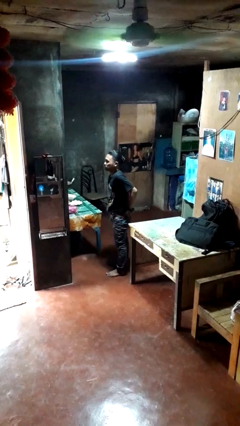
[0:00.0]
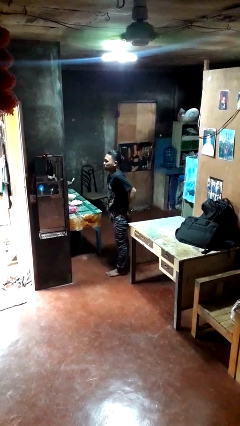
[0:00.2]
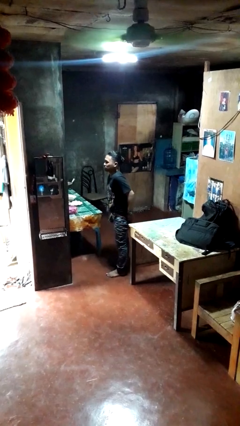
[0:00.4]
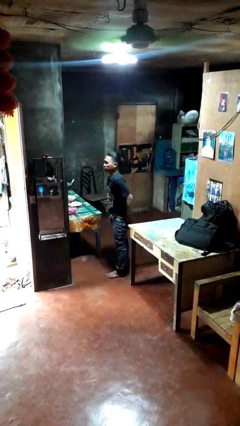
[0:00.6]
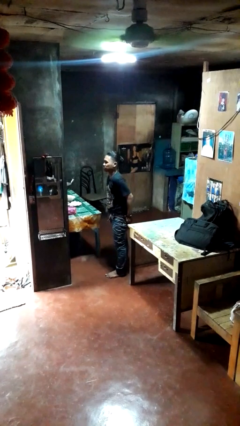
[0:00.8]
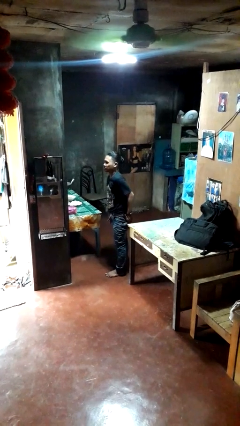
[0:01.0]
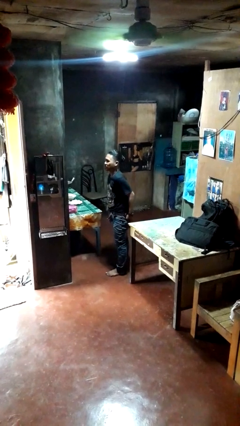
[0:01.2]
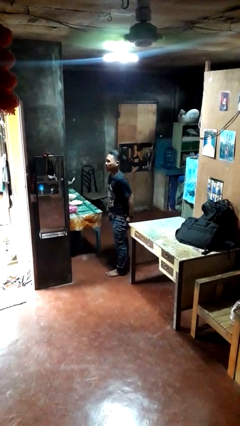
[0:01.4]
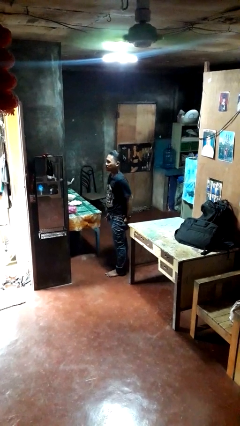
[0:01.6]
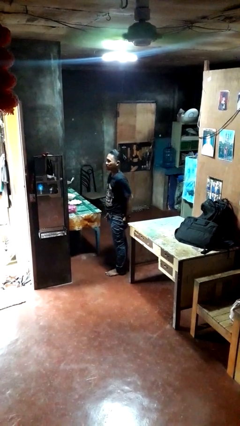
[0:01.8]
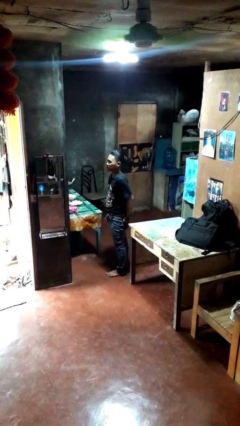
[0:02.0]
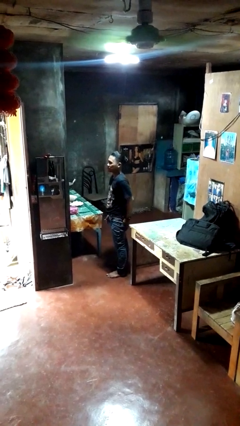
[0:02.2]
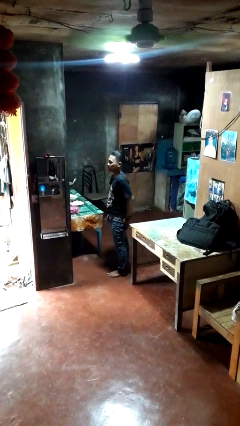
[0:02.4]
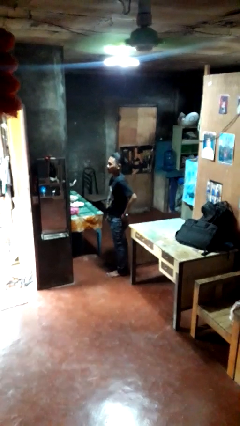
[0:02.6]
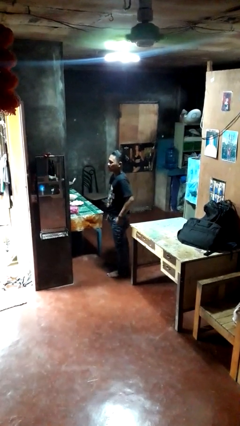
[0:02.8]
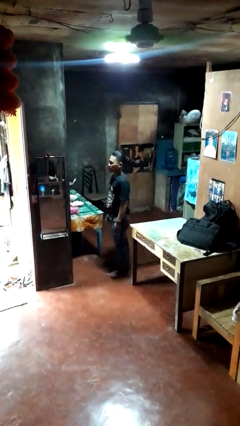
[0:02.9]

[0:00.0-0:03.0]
person puts hands in back pockets

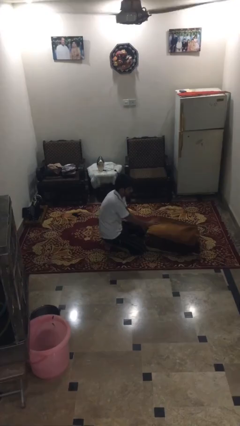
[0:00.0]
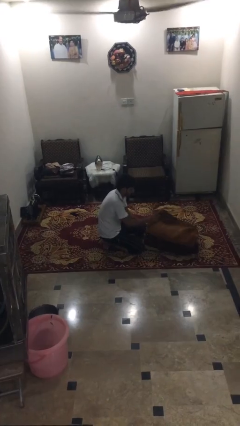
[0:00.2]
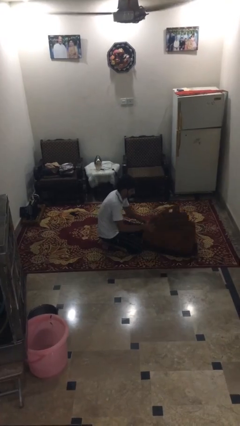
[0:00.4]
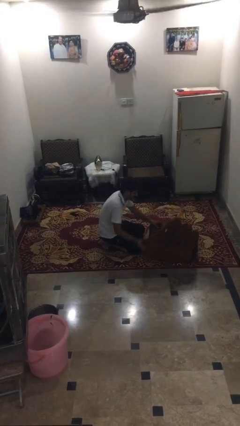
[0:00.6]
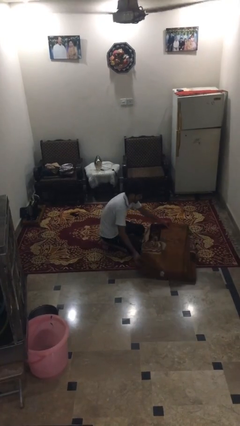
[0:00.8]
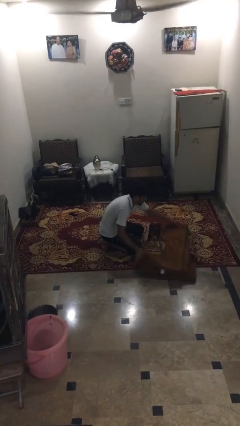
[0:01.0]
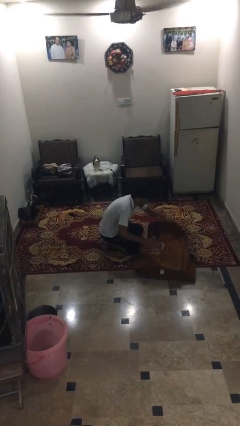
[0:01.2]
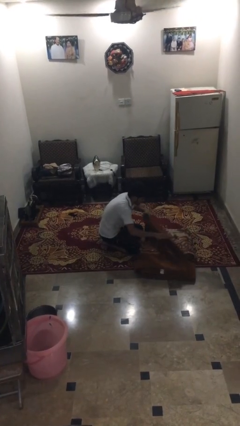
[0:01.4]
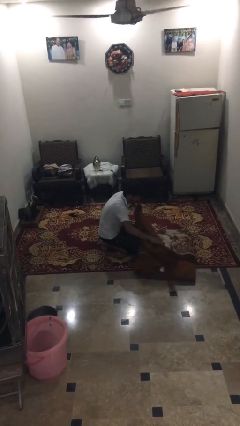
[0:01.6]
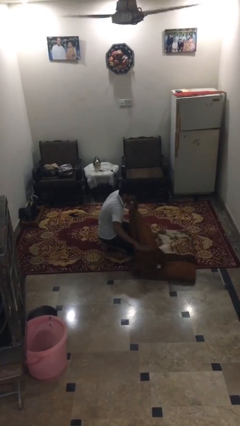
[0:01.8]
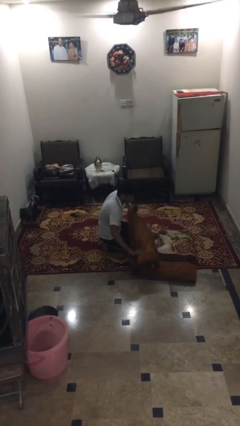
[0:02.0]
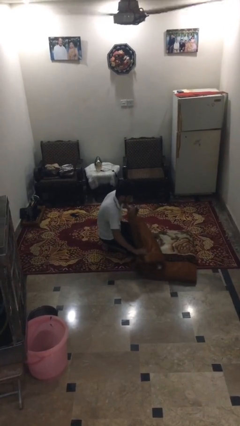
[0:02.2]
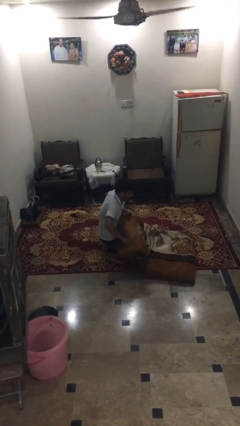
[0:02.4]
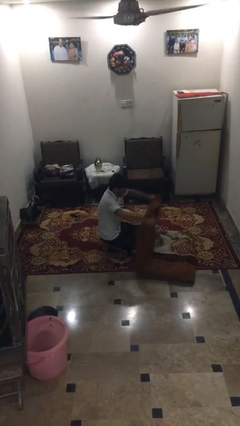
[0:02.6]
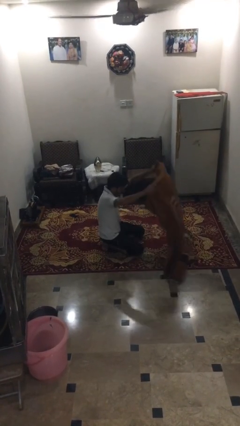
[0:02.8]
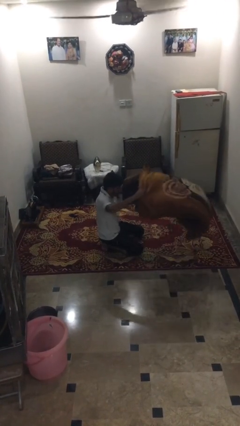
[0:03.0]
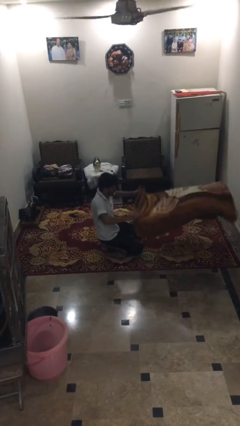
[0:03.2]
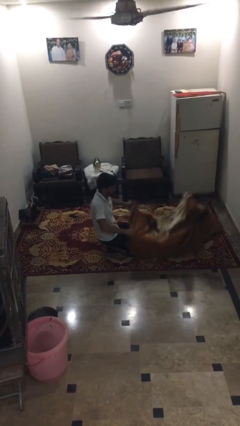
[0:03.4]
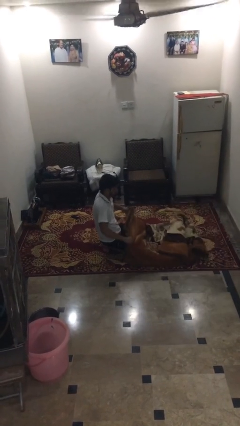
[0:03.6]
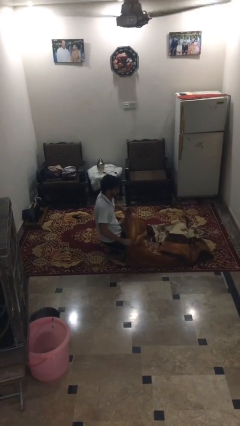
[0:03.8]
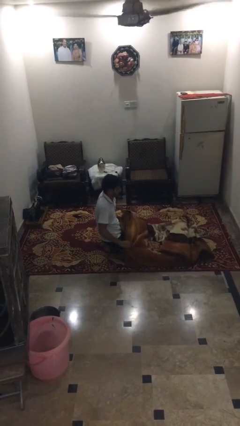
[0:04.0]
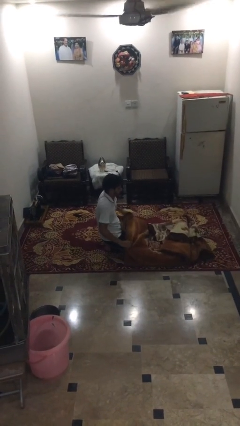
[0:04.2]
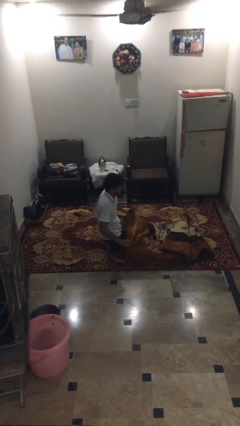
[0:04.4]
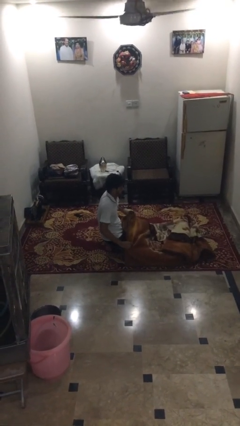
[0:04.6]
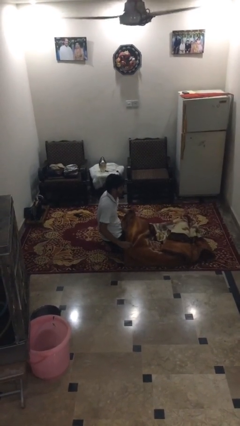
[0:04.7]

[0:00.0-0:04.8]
person unfolds blanket

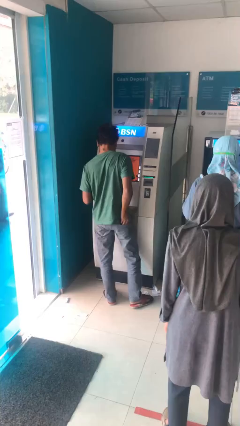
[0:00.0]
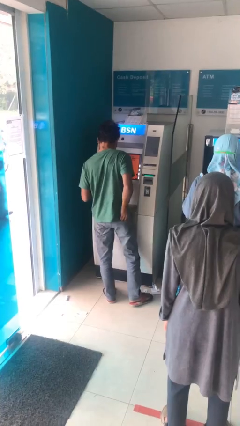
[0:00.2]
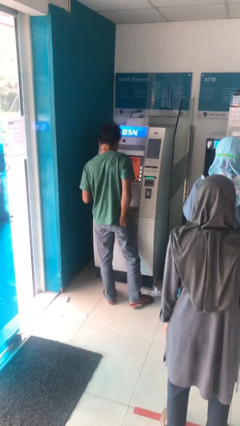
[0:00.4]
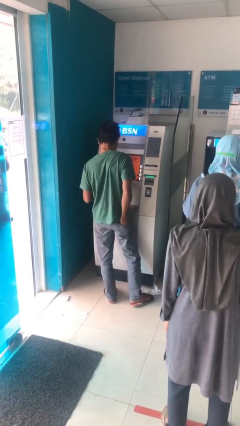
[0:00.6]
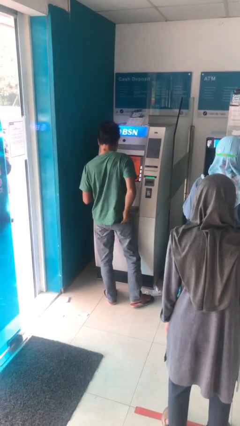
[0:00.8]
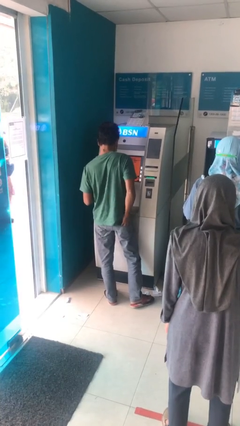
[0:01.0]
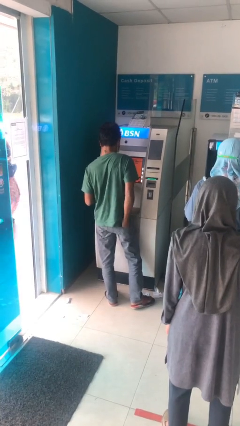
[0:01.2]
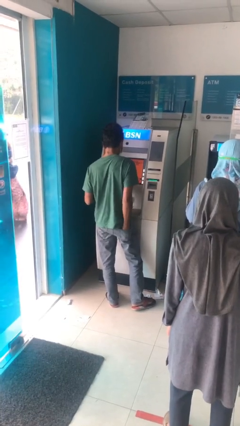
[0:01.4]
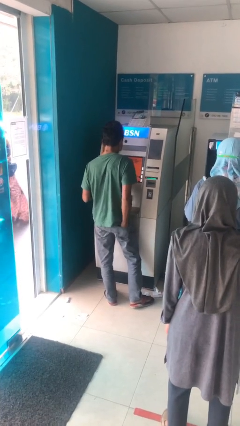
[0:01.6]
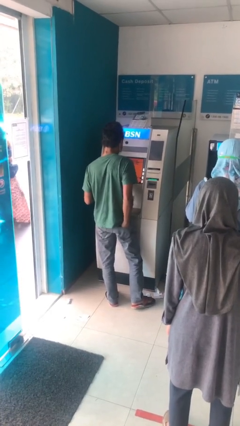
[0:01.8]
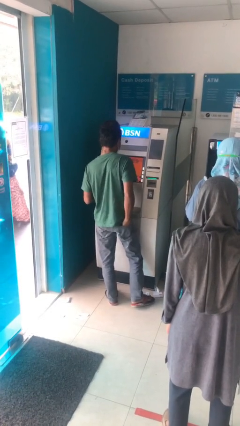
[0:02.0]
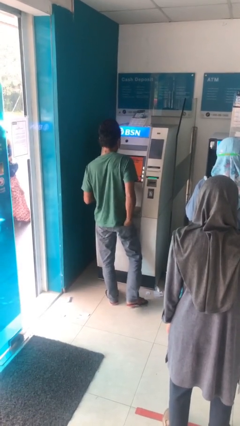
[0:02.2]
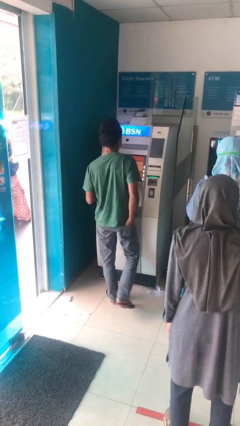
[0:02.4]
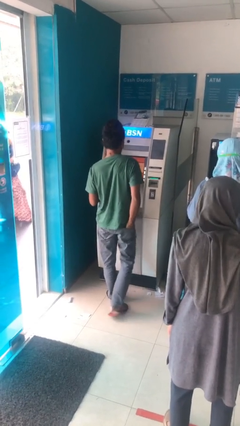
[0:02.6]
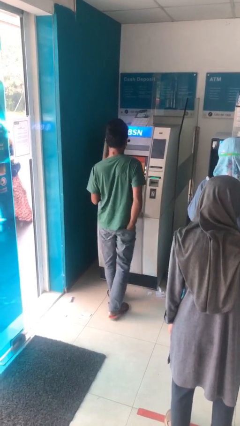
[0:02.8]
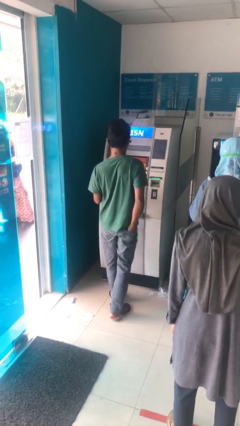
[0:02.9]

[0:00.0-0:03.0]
person purchases from machine

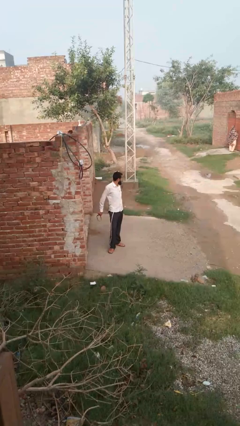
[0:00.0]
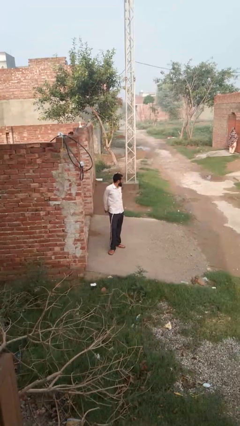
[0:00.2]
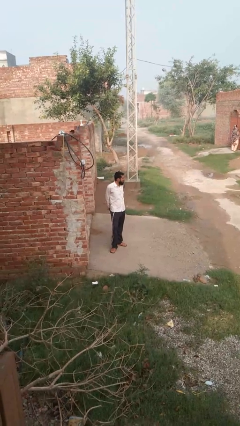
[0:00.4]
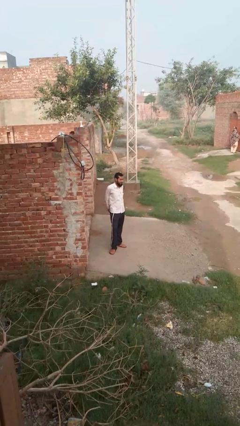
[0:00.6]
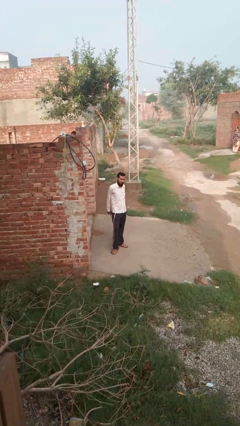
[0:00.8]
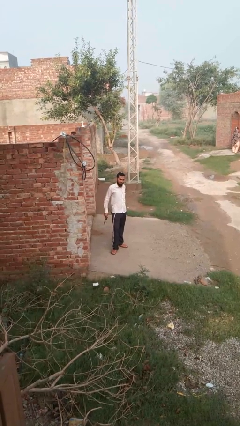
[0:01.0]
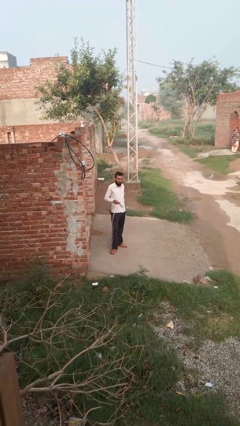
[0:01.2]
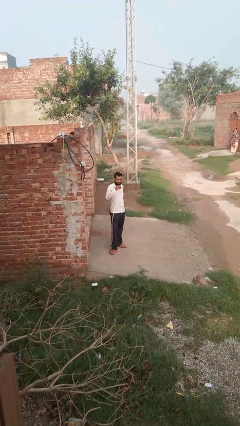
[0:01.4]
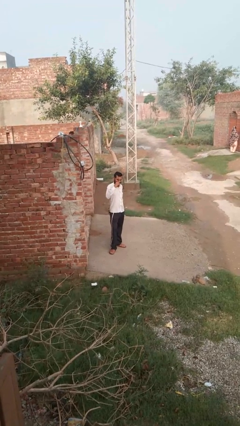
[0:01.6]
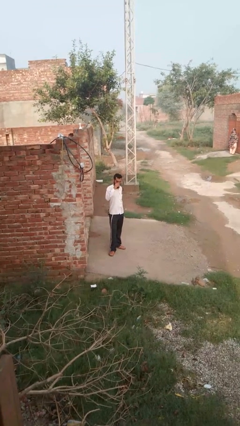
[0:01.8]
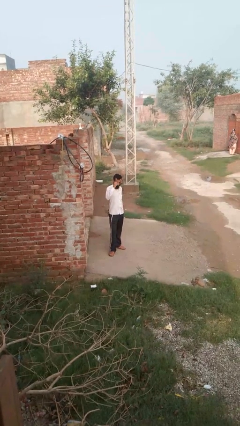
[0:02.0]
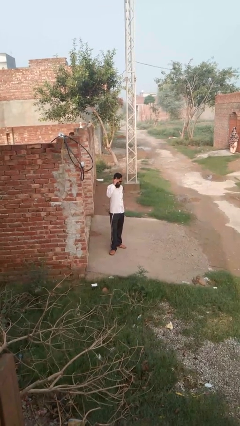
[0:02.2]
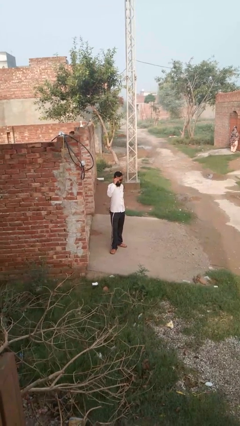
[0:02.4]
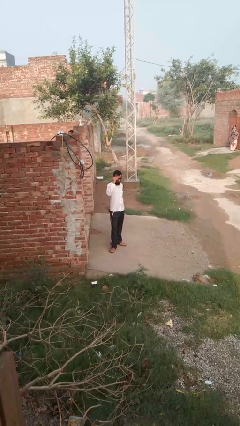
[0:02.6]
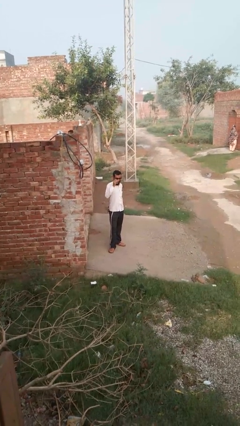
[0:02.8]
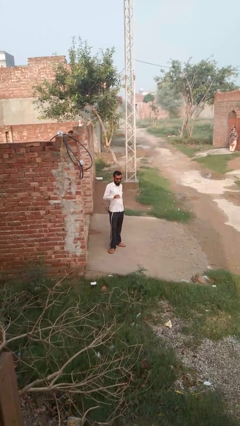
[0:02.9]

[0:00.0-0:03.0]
person puts on glasses

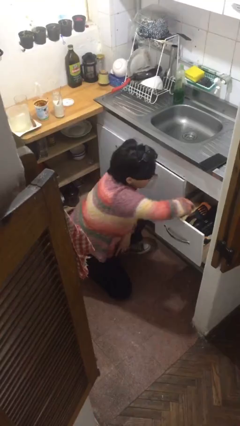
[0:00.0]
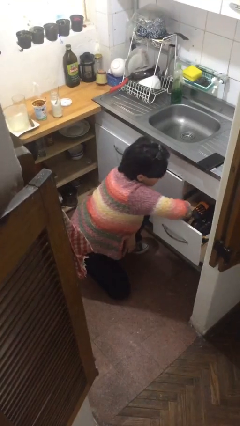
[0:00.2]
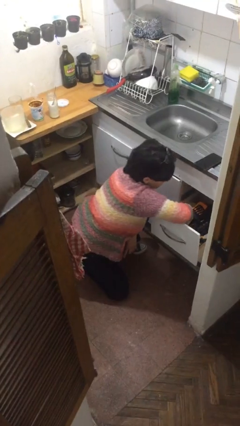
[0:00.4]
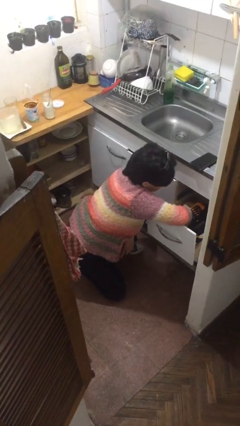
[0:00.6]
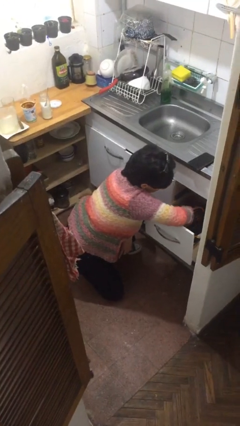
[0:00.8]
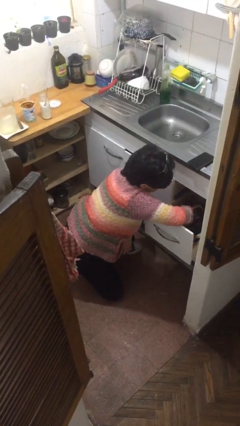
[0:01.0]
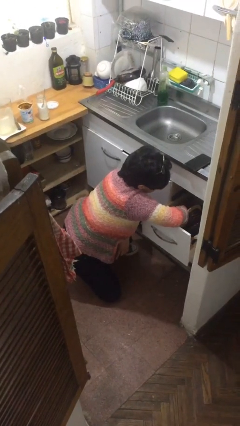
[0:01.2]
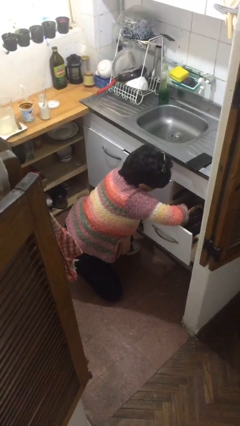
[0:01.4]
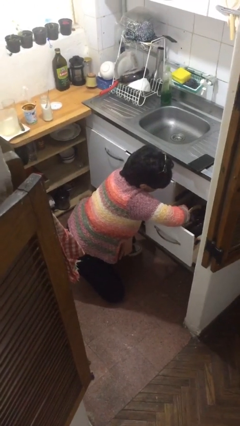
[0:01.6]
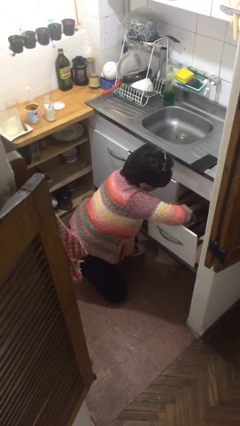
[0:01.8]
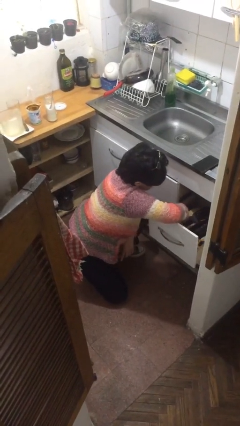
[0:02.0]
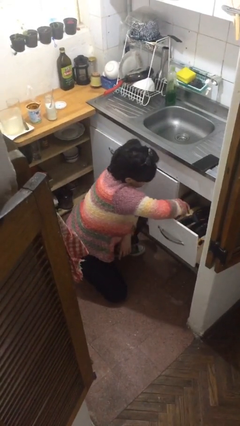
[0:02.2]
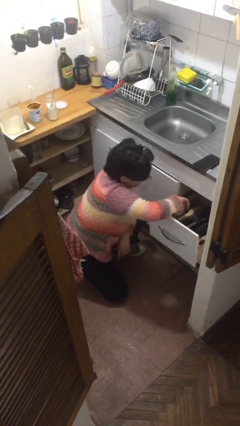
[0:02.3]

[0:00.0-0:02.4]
person searches in kitchen drawer

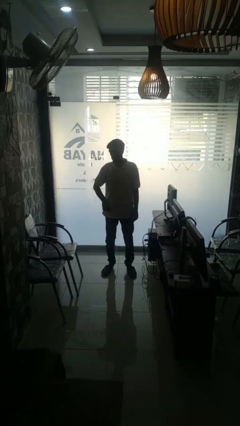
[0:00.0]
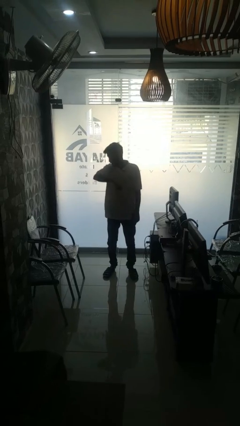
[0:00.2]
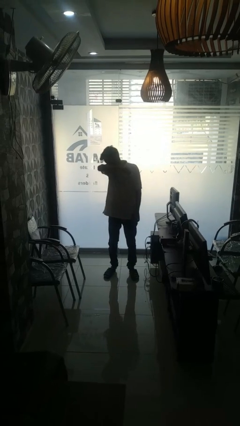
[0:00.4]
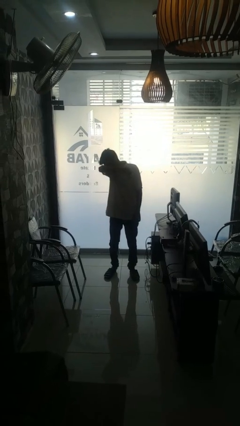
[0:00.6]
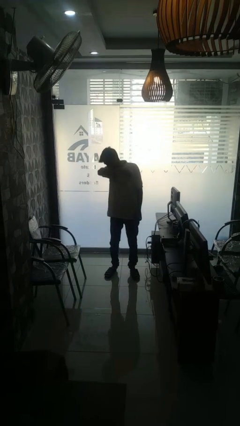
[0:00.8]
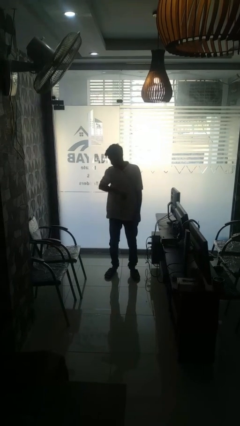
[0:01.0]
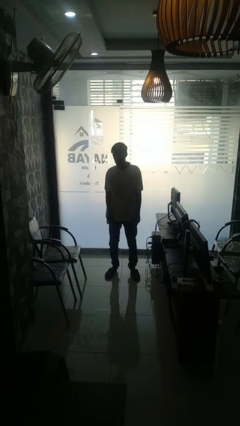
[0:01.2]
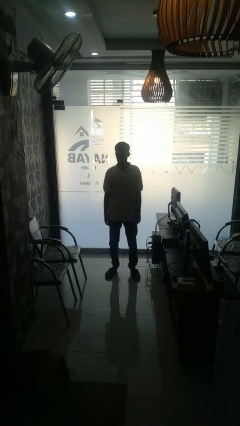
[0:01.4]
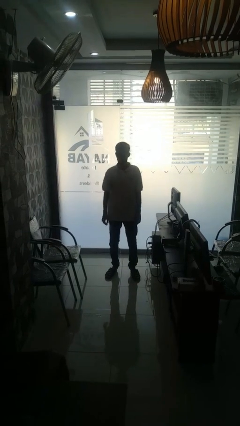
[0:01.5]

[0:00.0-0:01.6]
person sneezes into arm
